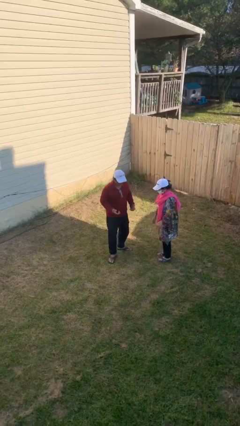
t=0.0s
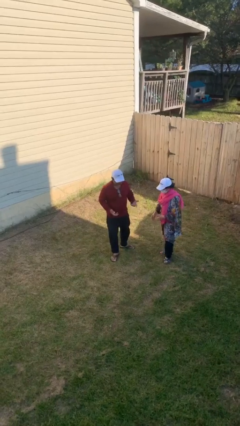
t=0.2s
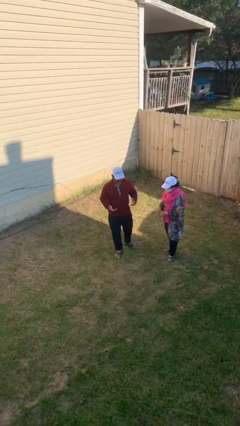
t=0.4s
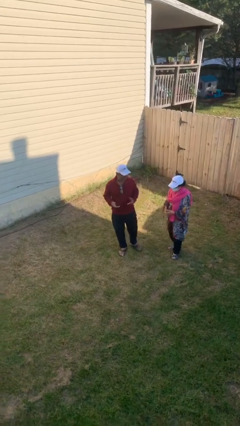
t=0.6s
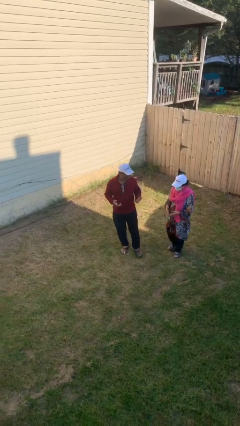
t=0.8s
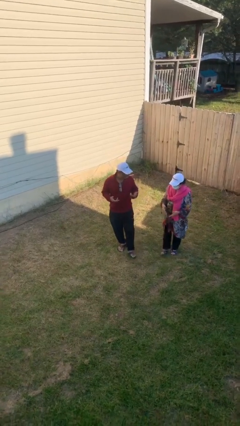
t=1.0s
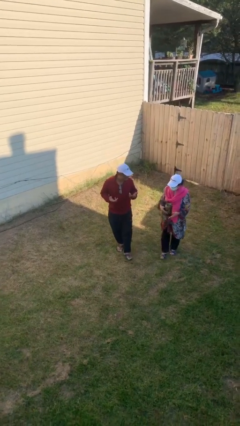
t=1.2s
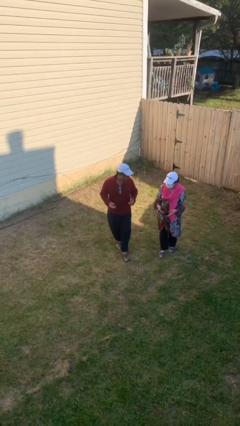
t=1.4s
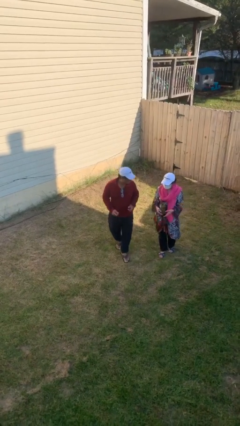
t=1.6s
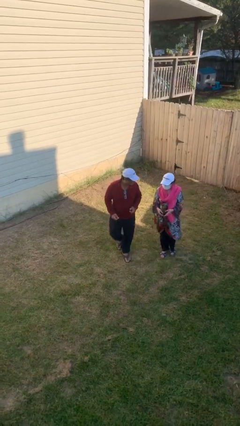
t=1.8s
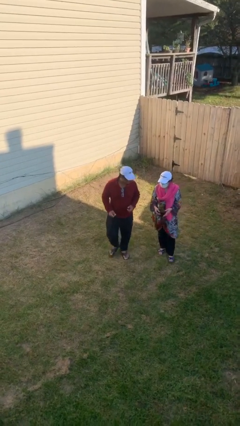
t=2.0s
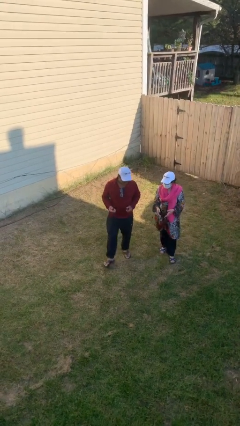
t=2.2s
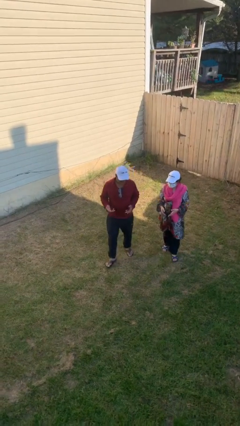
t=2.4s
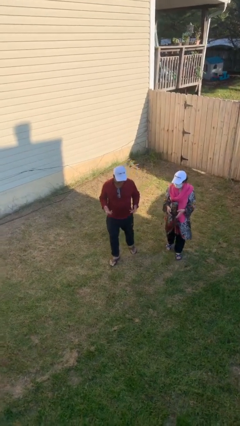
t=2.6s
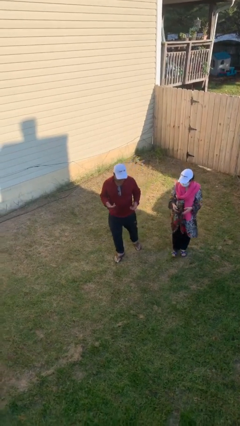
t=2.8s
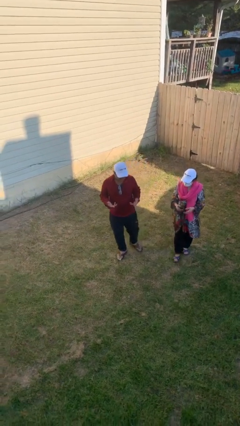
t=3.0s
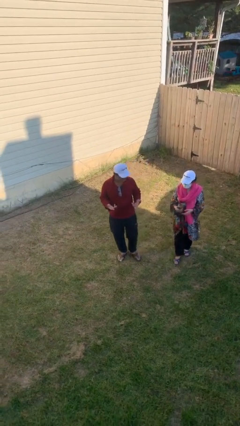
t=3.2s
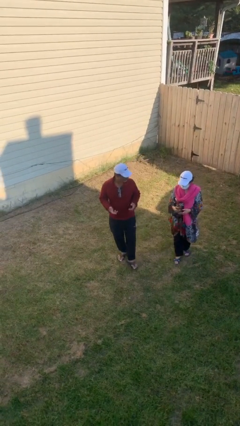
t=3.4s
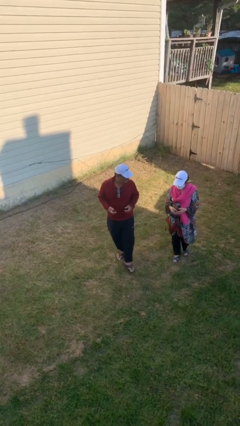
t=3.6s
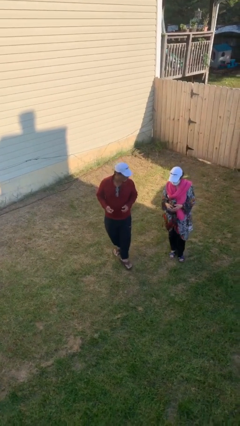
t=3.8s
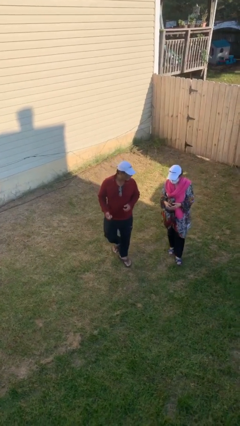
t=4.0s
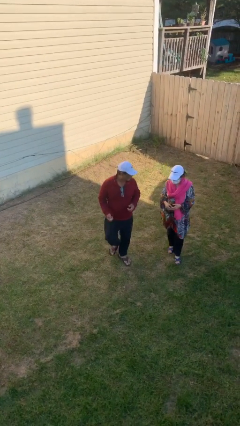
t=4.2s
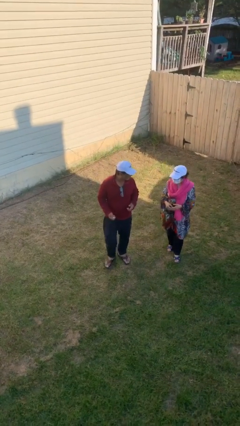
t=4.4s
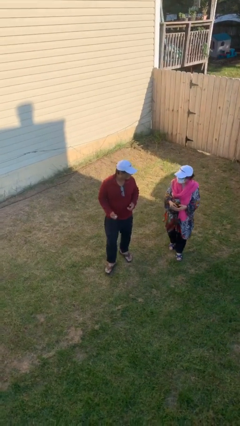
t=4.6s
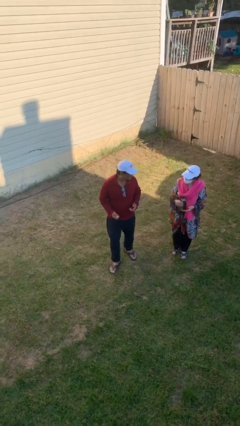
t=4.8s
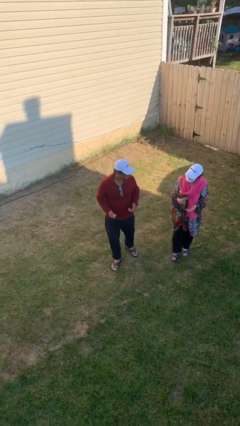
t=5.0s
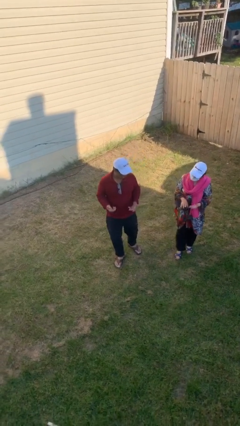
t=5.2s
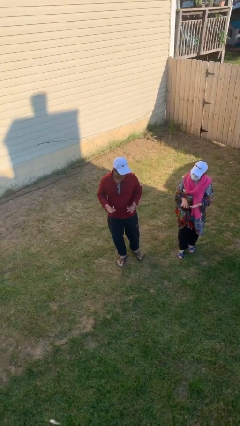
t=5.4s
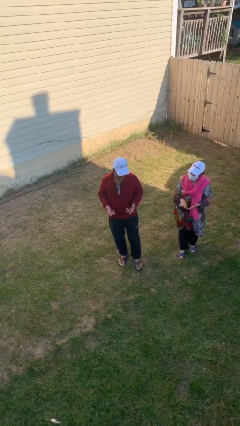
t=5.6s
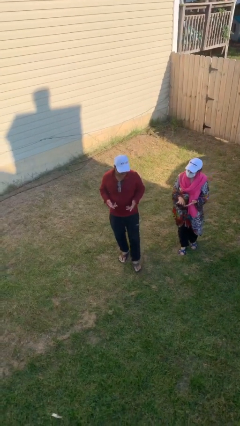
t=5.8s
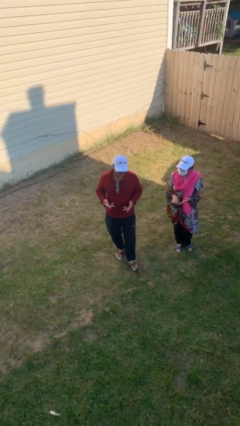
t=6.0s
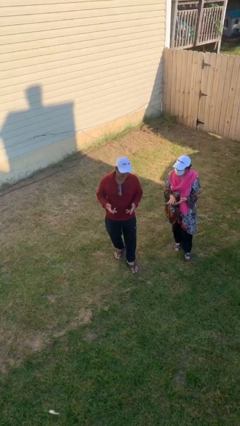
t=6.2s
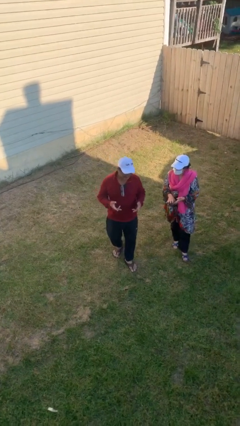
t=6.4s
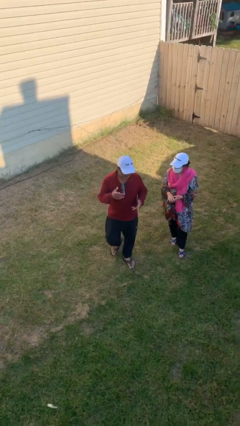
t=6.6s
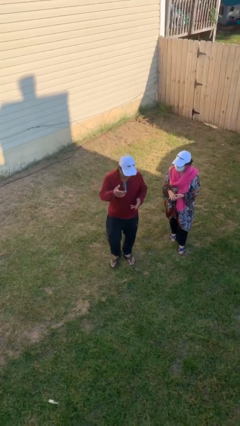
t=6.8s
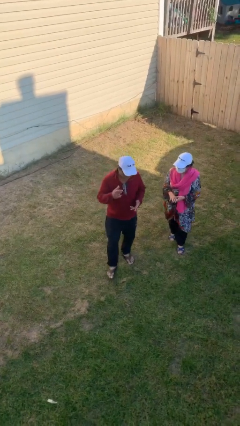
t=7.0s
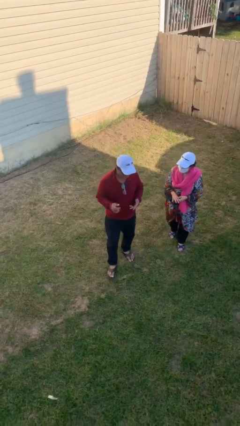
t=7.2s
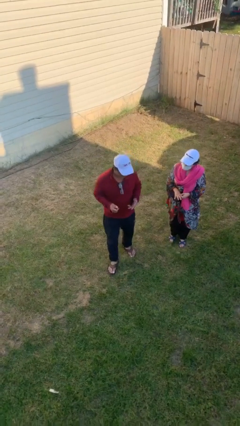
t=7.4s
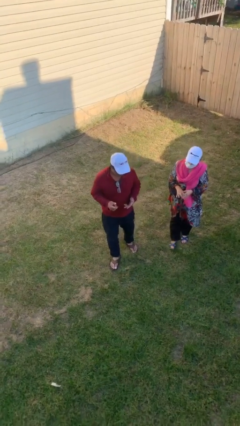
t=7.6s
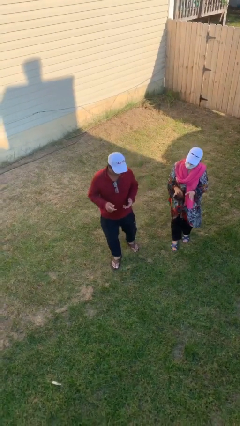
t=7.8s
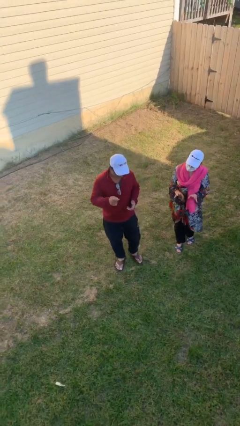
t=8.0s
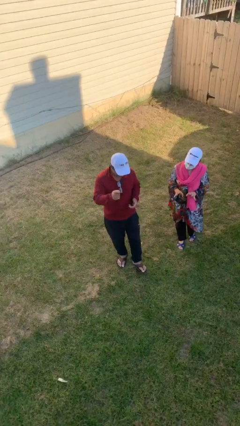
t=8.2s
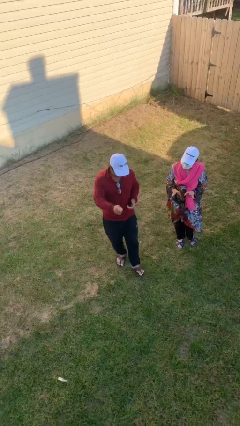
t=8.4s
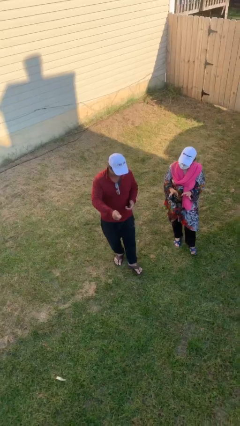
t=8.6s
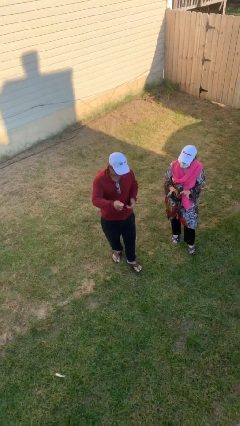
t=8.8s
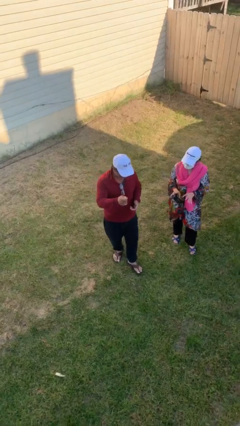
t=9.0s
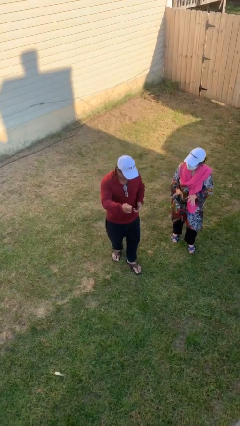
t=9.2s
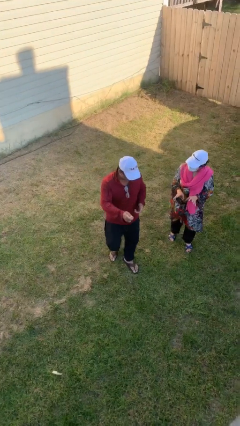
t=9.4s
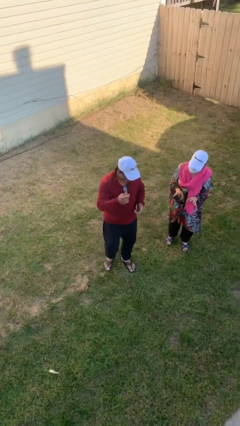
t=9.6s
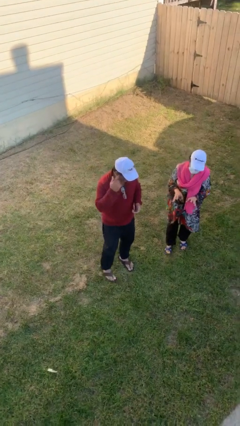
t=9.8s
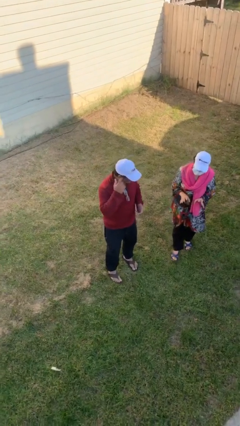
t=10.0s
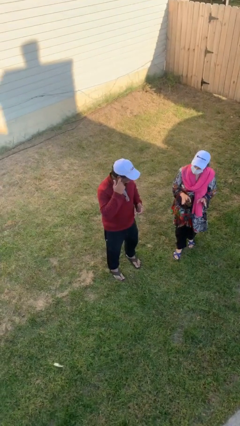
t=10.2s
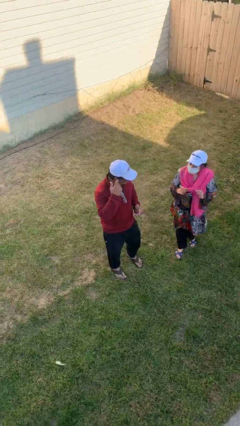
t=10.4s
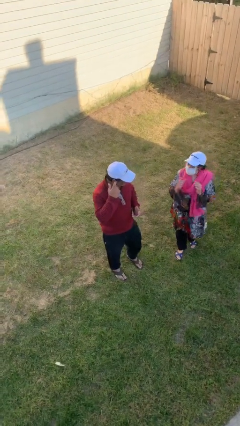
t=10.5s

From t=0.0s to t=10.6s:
person talks to person

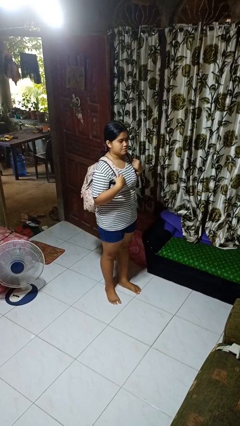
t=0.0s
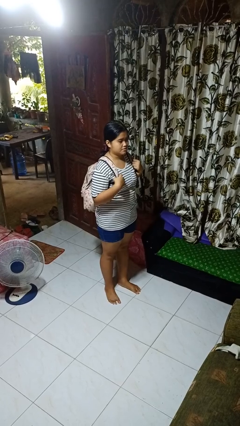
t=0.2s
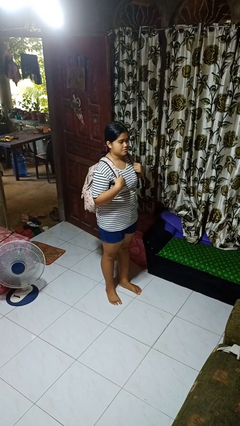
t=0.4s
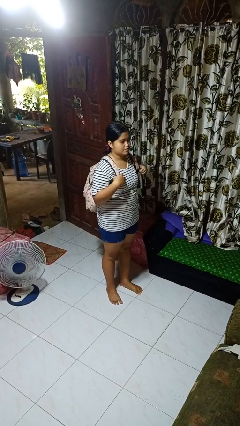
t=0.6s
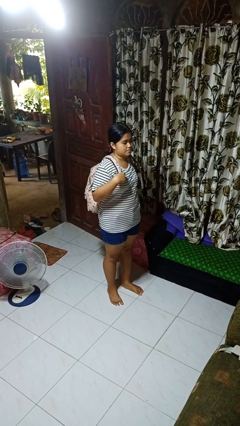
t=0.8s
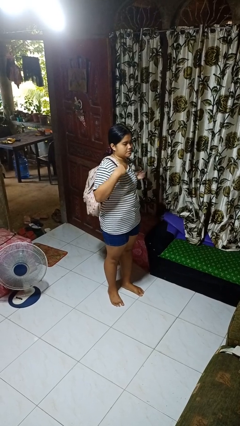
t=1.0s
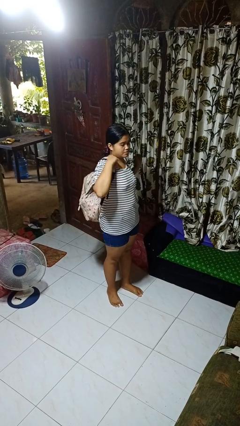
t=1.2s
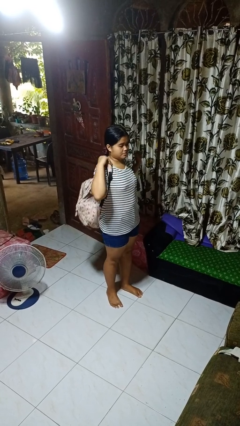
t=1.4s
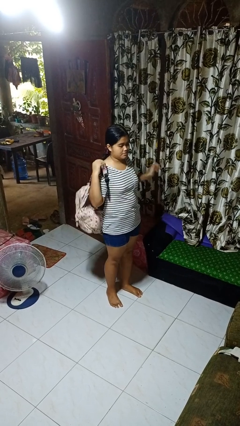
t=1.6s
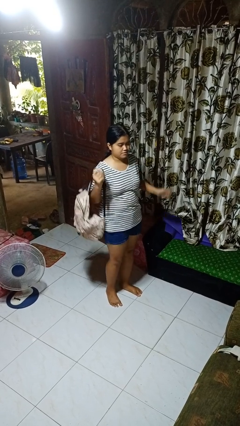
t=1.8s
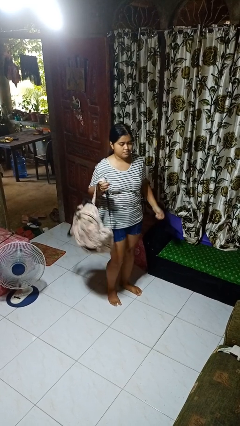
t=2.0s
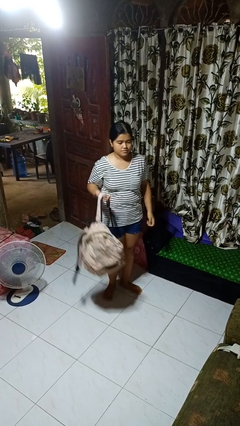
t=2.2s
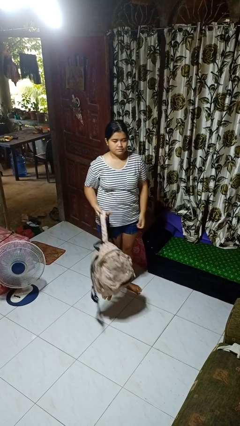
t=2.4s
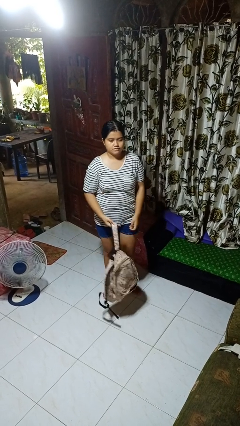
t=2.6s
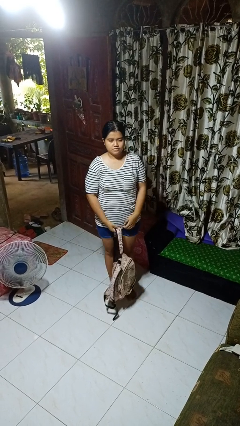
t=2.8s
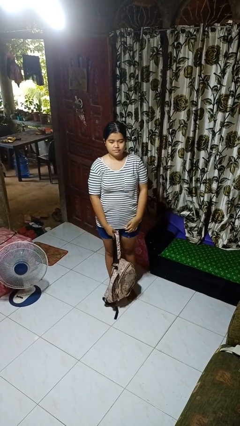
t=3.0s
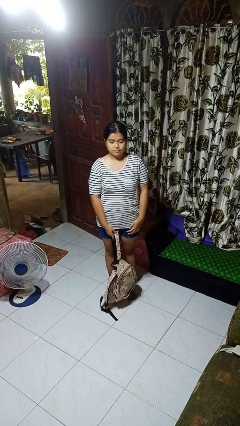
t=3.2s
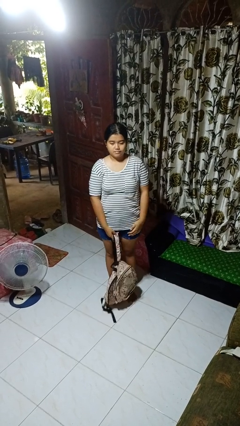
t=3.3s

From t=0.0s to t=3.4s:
person takes off backpack

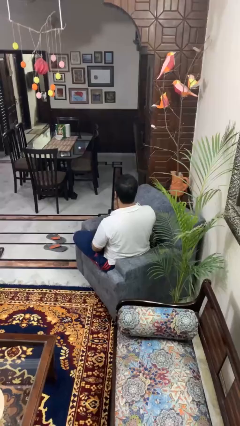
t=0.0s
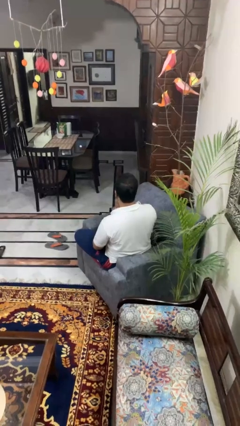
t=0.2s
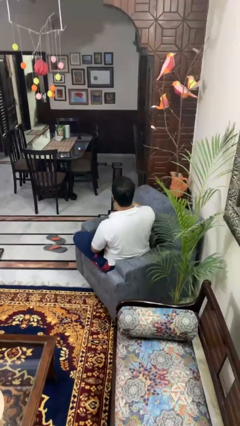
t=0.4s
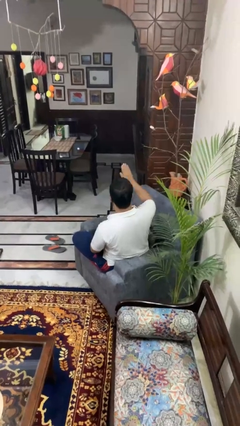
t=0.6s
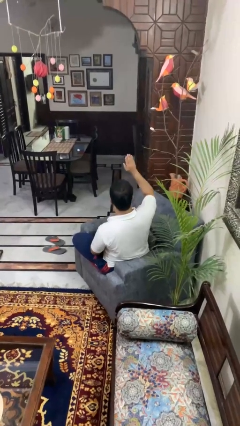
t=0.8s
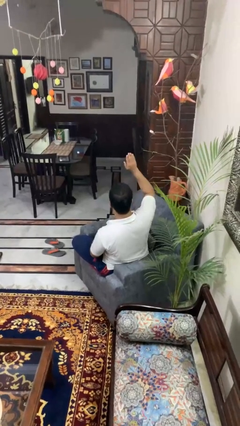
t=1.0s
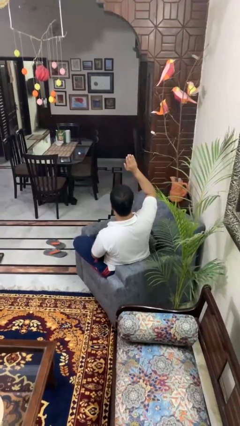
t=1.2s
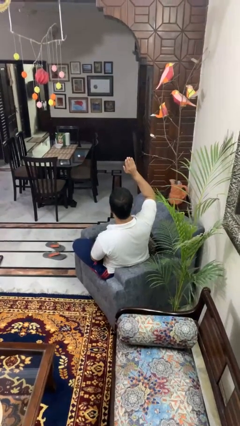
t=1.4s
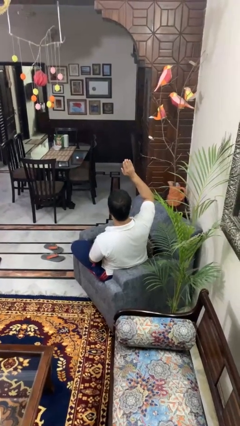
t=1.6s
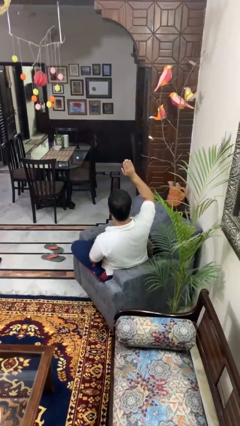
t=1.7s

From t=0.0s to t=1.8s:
person gestures raise hand

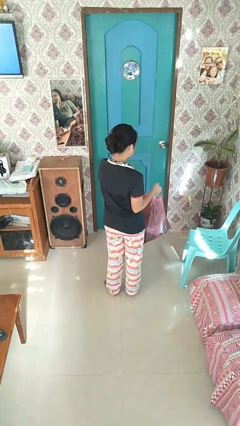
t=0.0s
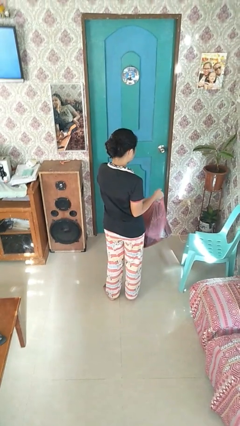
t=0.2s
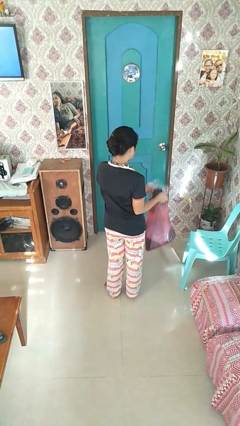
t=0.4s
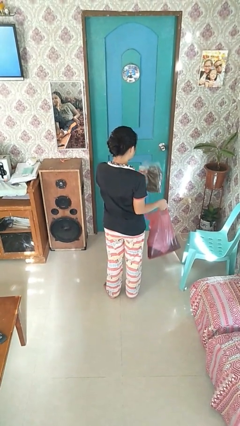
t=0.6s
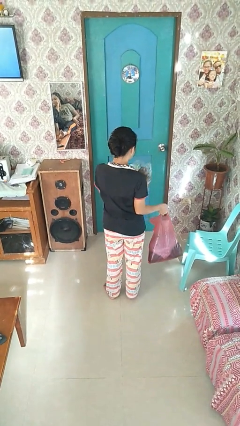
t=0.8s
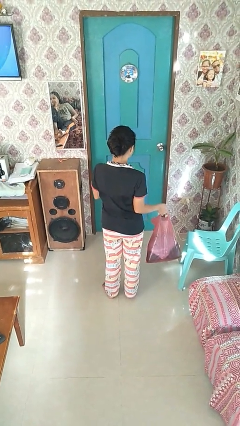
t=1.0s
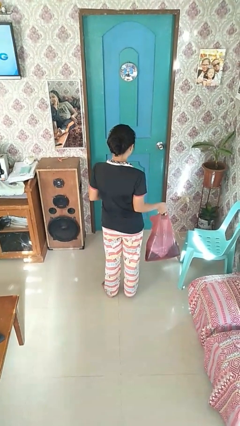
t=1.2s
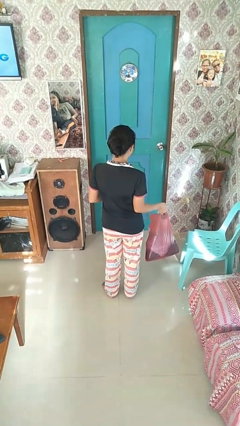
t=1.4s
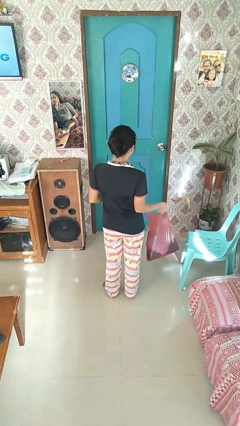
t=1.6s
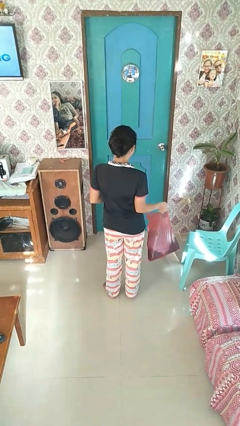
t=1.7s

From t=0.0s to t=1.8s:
person takes object from bag
